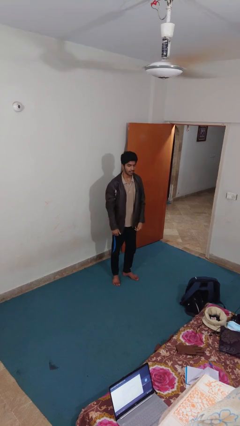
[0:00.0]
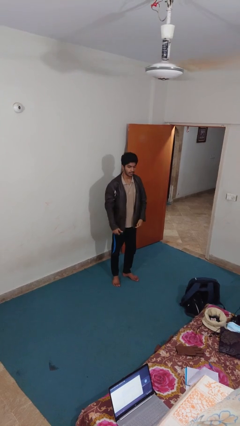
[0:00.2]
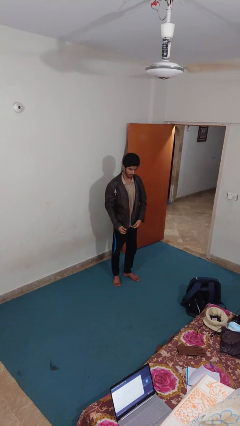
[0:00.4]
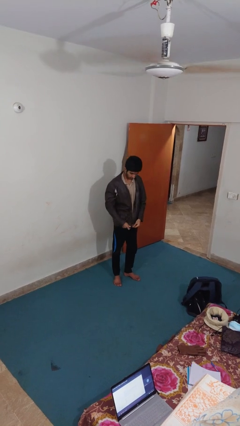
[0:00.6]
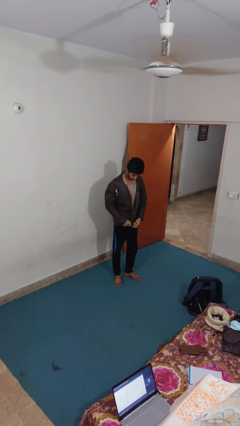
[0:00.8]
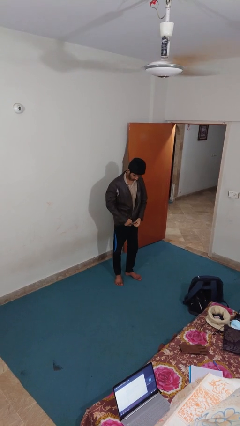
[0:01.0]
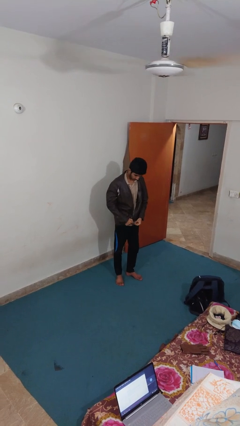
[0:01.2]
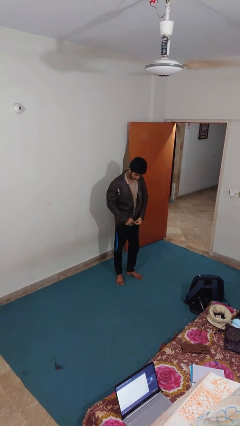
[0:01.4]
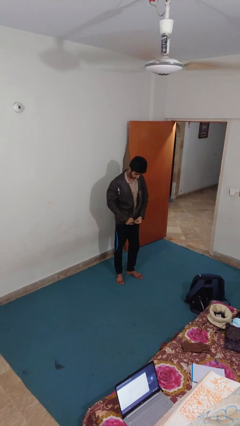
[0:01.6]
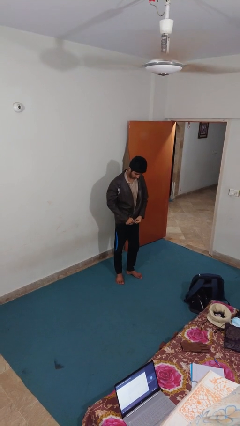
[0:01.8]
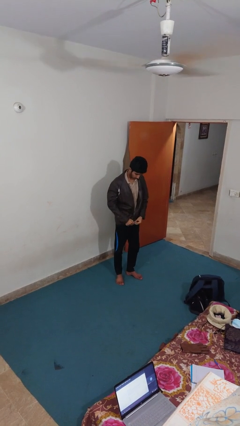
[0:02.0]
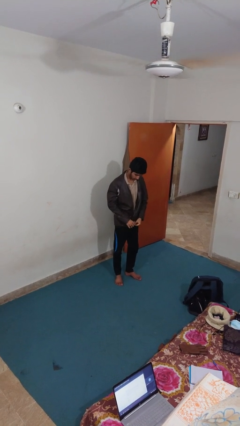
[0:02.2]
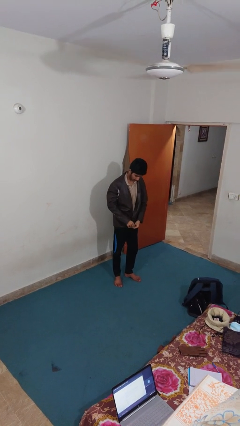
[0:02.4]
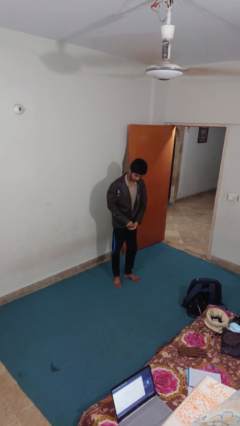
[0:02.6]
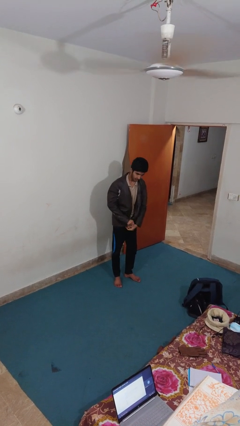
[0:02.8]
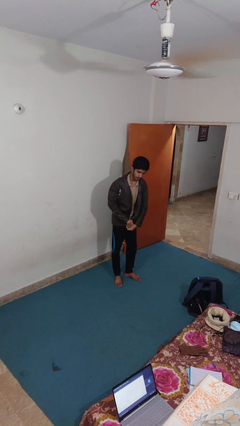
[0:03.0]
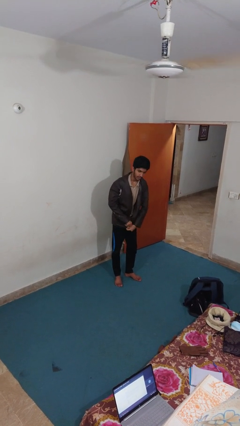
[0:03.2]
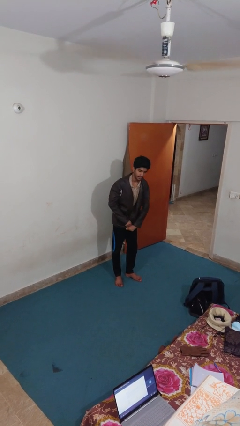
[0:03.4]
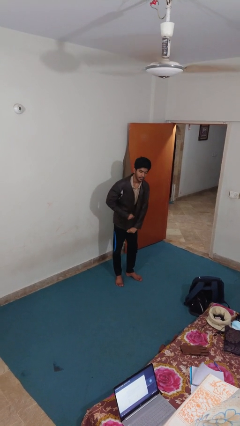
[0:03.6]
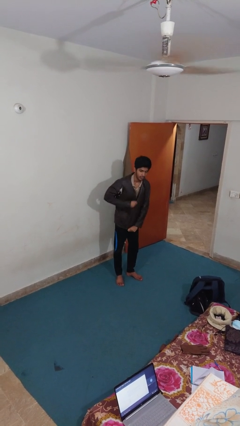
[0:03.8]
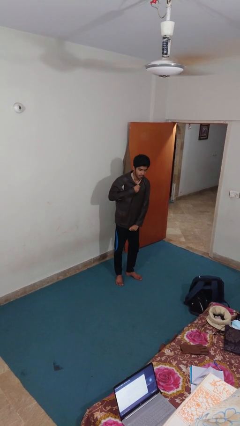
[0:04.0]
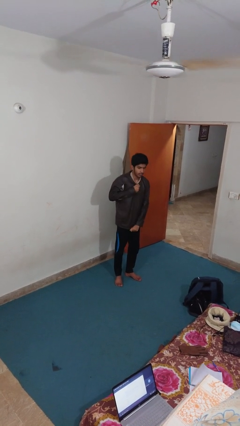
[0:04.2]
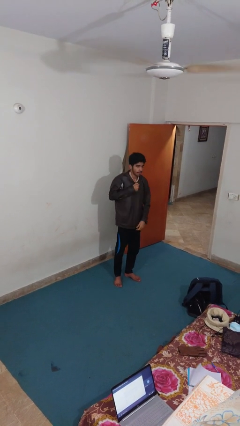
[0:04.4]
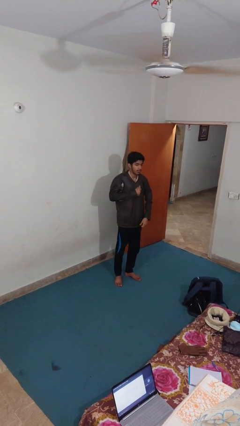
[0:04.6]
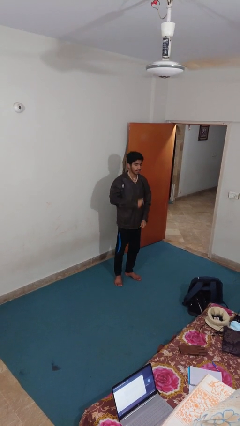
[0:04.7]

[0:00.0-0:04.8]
person zips up jacket

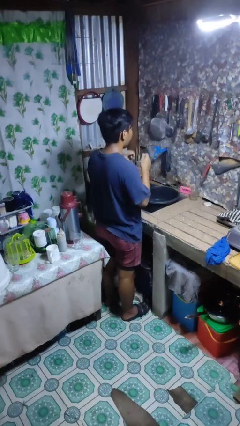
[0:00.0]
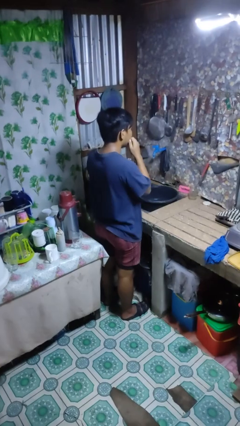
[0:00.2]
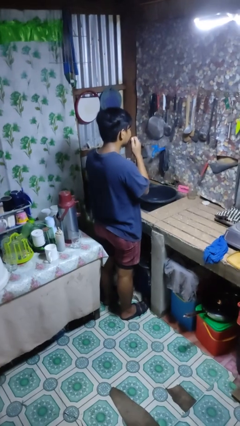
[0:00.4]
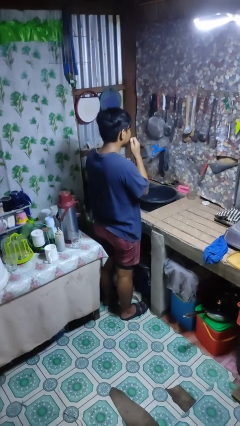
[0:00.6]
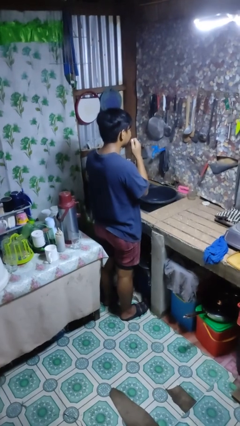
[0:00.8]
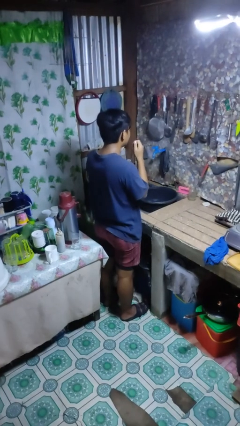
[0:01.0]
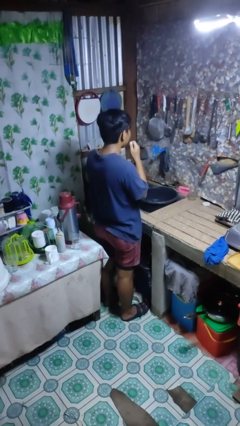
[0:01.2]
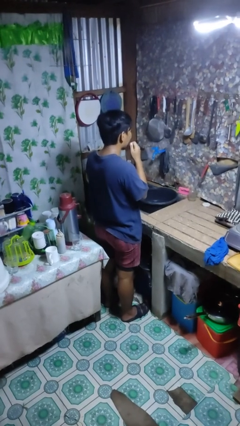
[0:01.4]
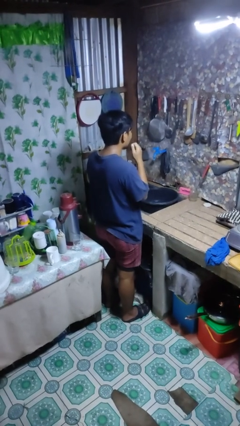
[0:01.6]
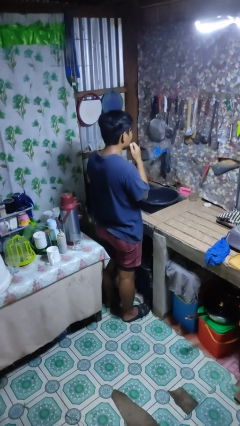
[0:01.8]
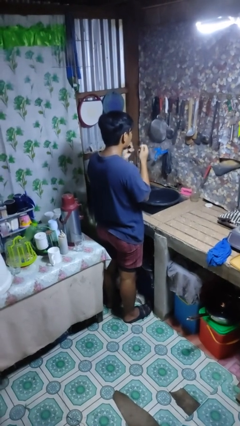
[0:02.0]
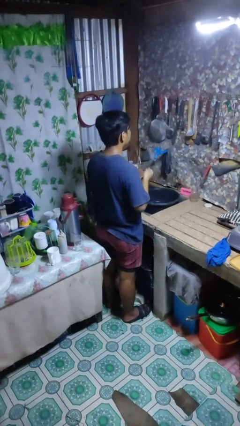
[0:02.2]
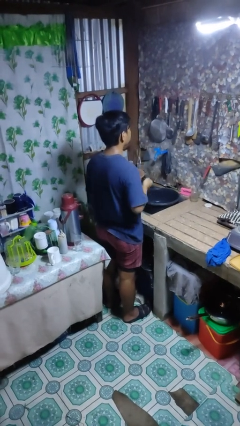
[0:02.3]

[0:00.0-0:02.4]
person flosses

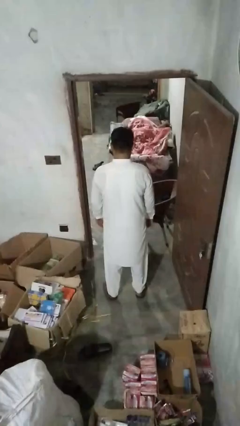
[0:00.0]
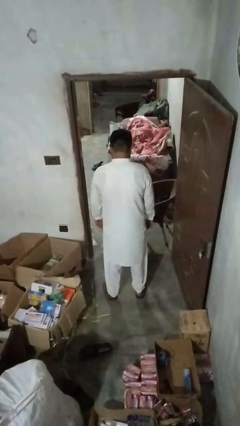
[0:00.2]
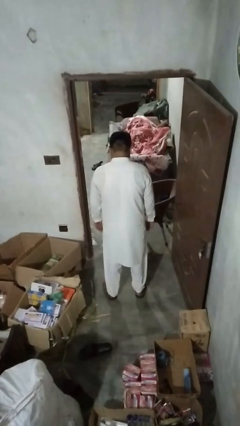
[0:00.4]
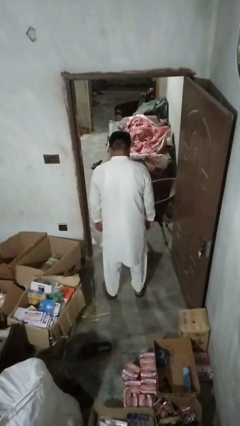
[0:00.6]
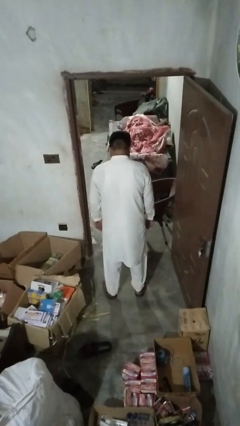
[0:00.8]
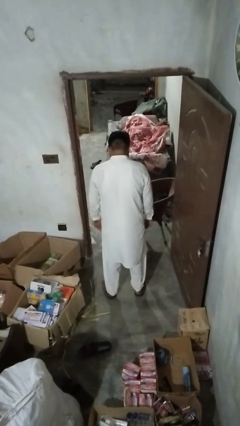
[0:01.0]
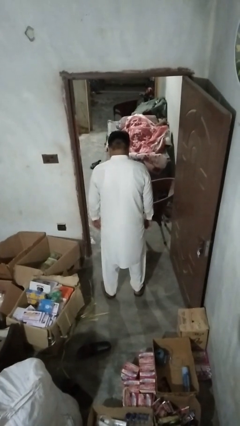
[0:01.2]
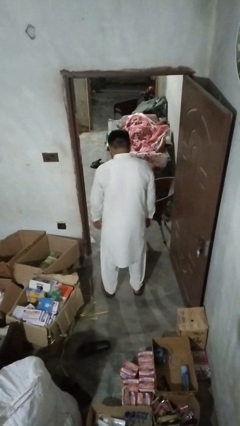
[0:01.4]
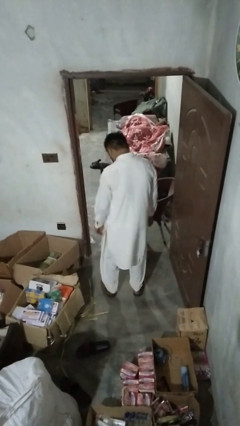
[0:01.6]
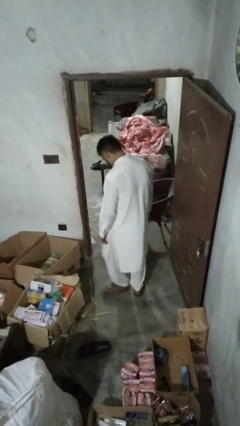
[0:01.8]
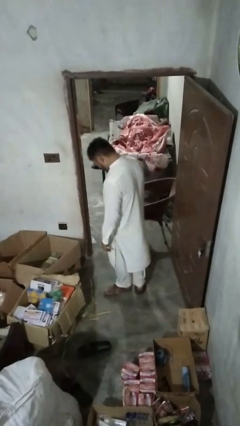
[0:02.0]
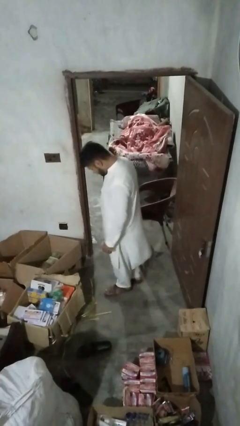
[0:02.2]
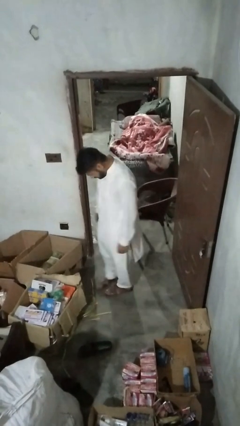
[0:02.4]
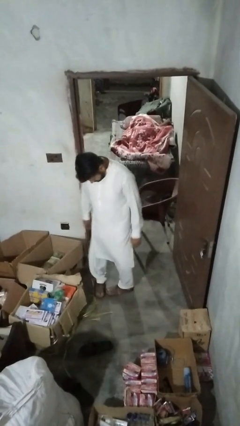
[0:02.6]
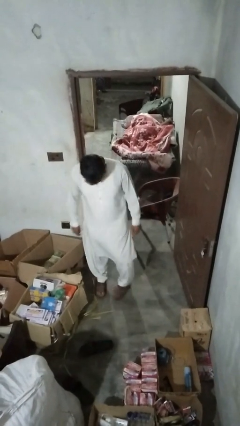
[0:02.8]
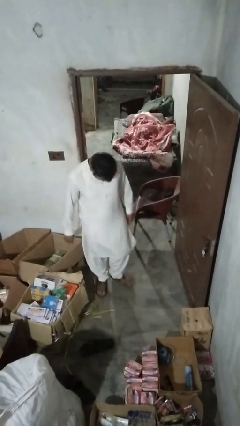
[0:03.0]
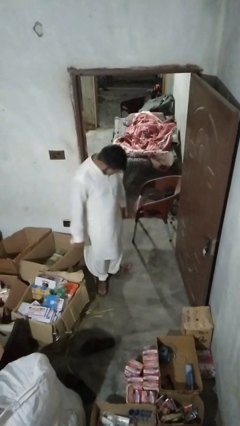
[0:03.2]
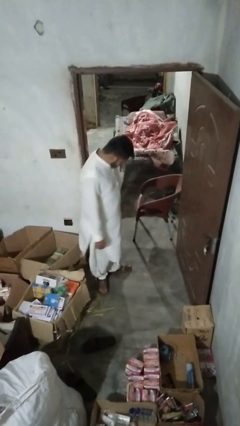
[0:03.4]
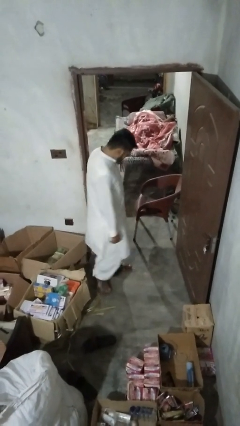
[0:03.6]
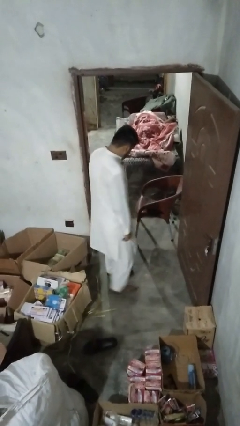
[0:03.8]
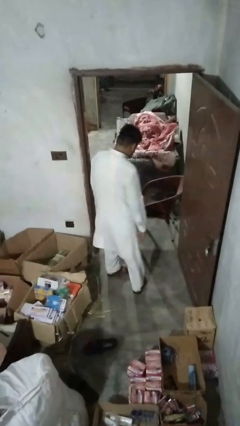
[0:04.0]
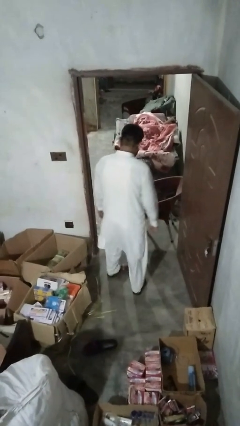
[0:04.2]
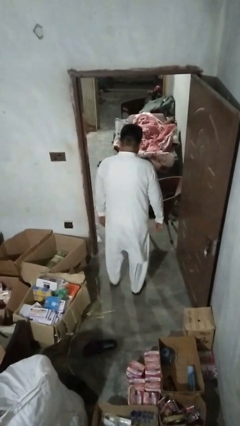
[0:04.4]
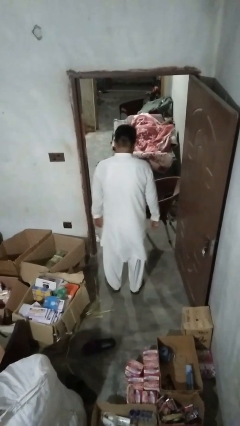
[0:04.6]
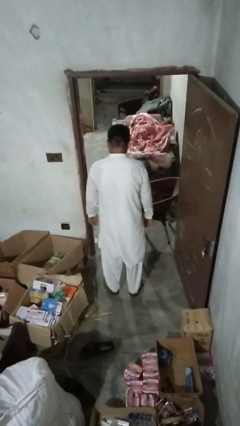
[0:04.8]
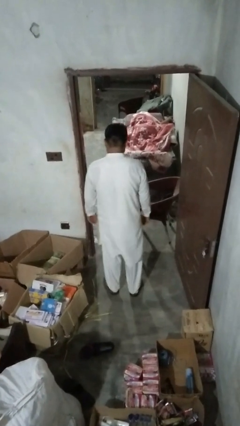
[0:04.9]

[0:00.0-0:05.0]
person twirls

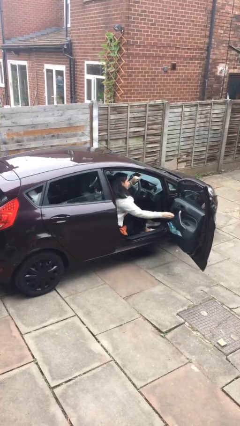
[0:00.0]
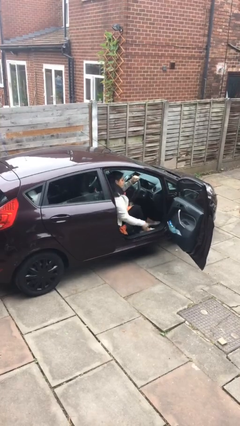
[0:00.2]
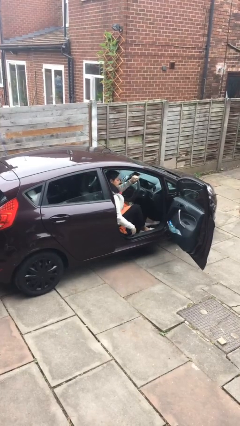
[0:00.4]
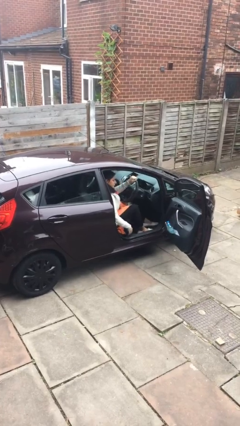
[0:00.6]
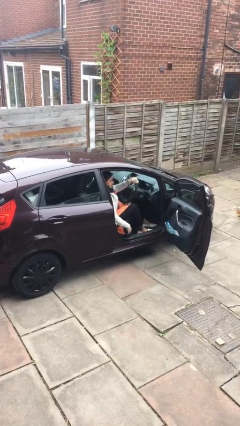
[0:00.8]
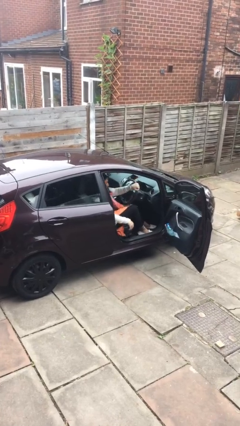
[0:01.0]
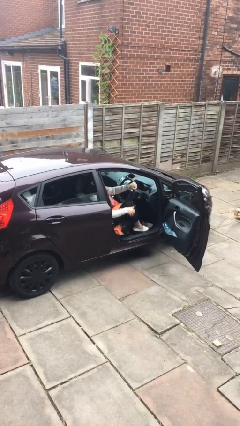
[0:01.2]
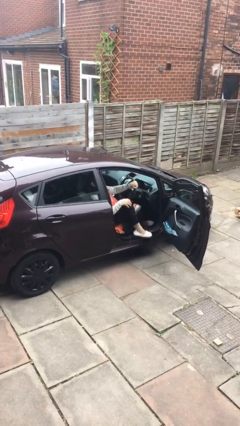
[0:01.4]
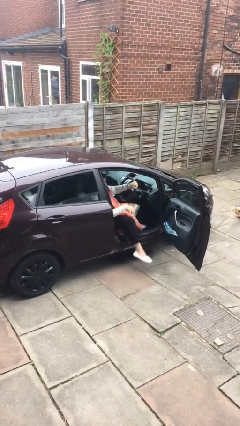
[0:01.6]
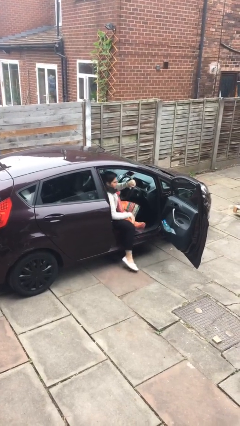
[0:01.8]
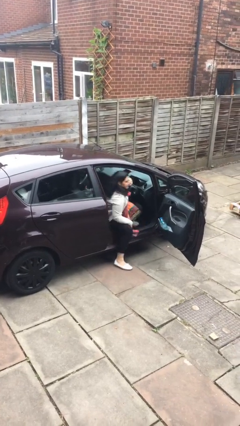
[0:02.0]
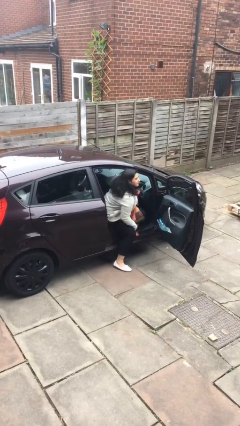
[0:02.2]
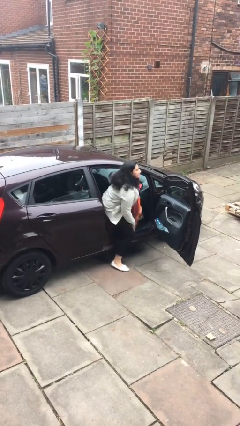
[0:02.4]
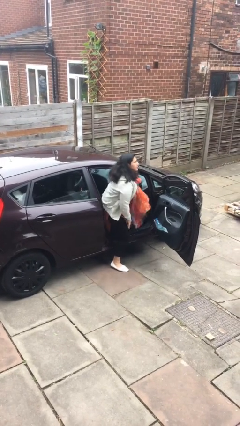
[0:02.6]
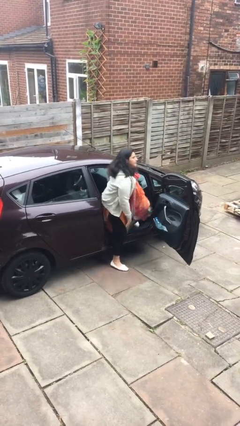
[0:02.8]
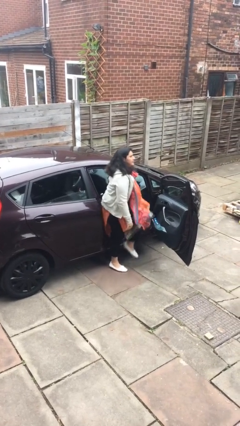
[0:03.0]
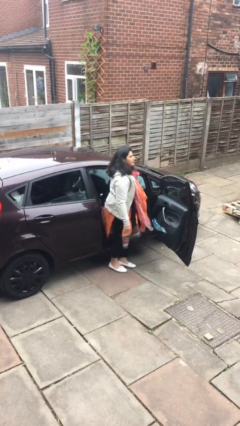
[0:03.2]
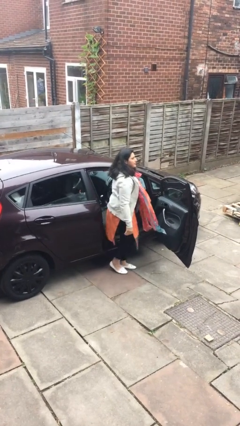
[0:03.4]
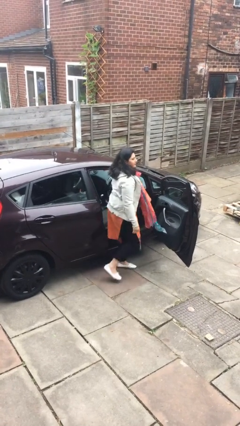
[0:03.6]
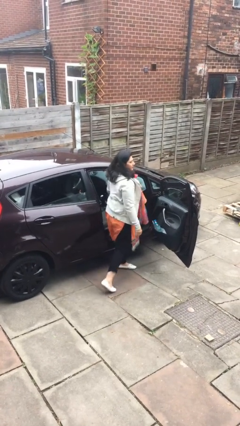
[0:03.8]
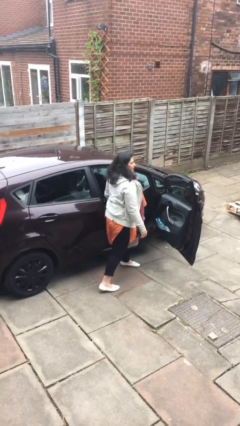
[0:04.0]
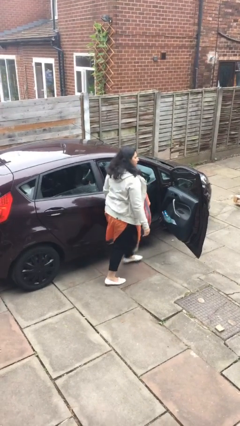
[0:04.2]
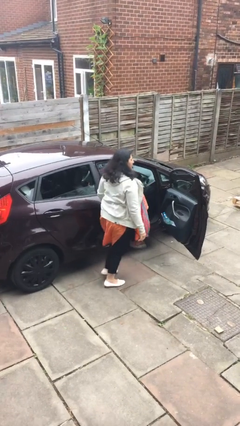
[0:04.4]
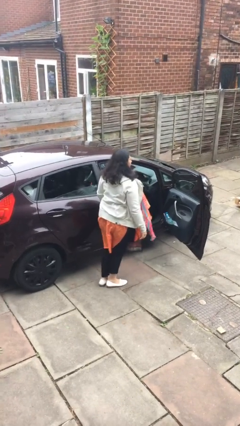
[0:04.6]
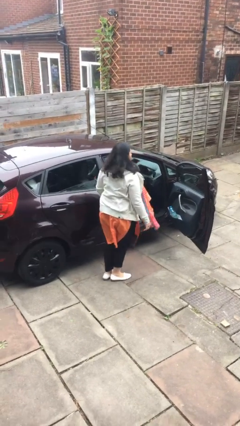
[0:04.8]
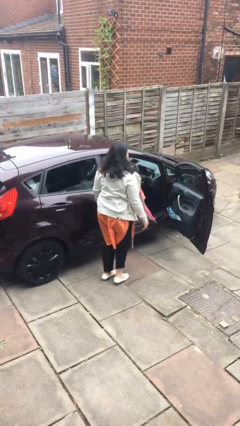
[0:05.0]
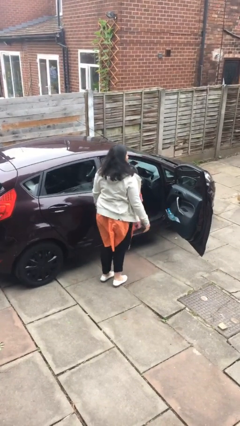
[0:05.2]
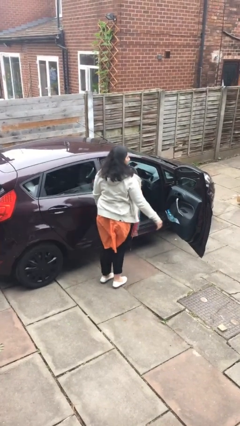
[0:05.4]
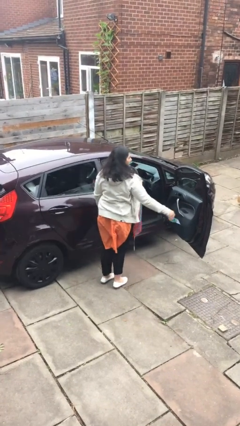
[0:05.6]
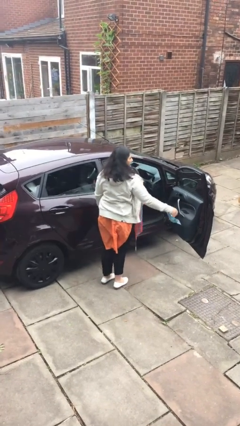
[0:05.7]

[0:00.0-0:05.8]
person exits car

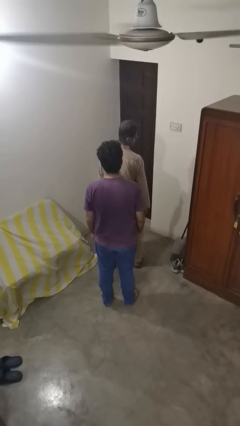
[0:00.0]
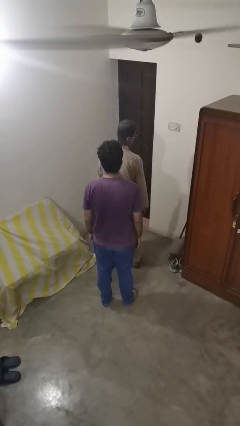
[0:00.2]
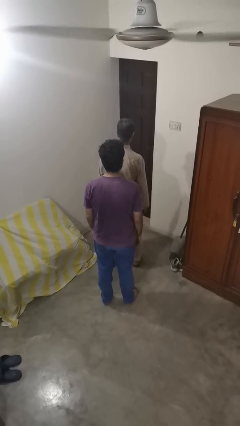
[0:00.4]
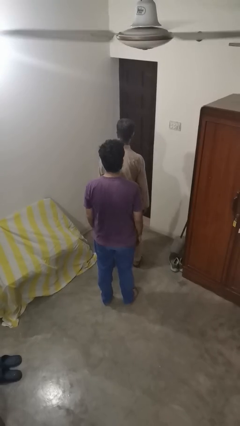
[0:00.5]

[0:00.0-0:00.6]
person spins person around
